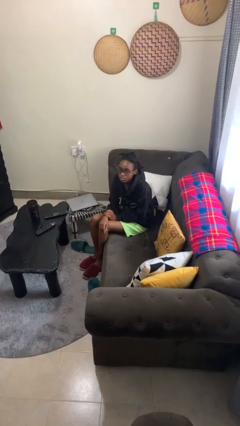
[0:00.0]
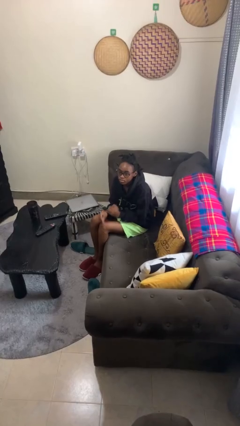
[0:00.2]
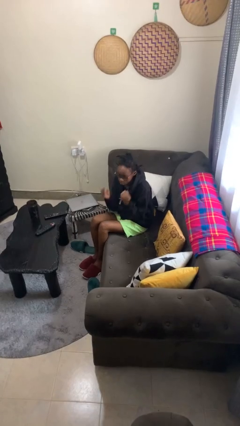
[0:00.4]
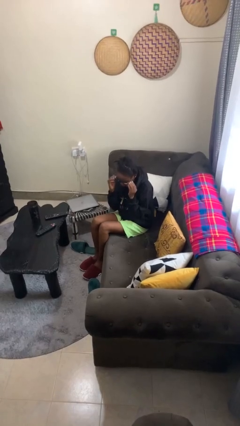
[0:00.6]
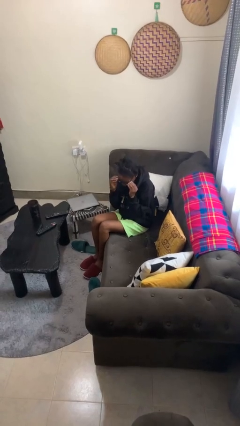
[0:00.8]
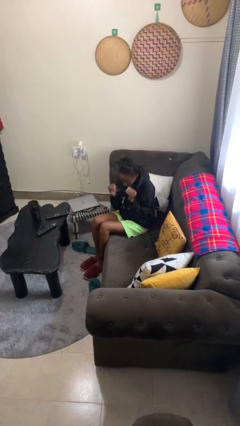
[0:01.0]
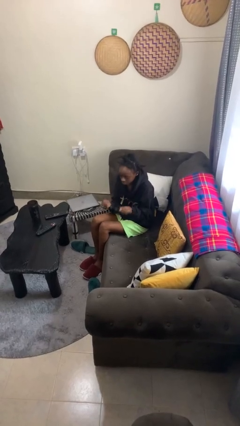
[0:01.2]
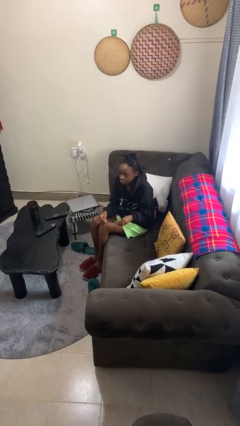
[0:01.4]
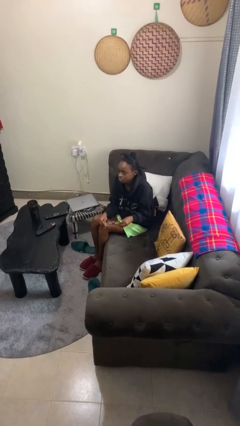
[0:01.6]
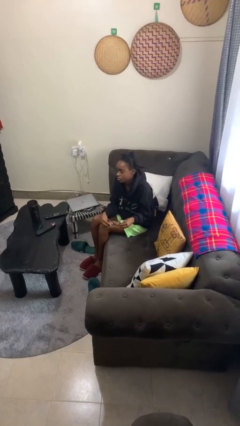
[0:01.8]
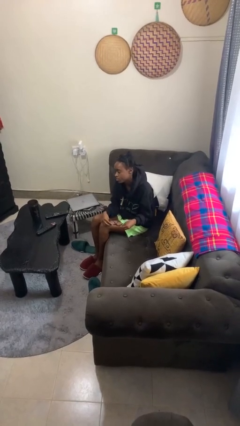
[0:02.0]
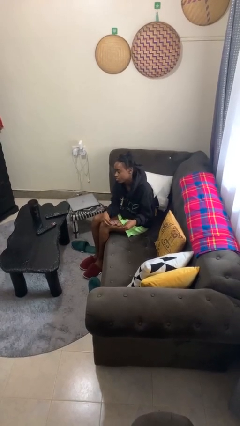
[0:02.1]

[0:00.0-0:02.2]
person takes off glasses

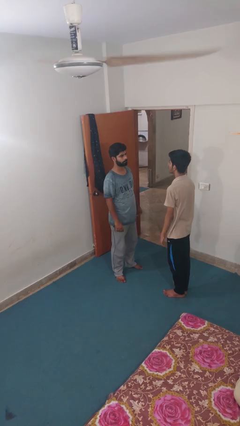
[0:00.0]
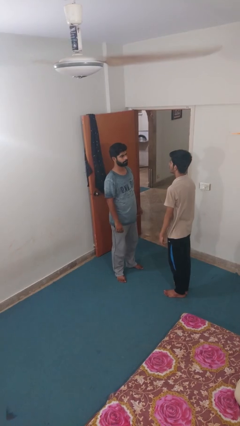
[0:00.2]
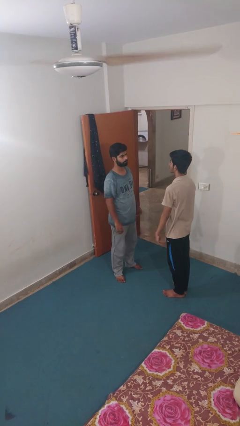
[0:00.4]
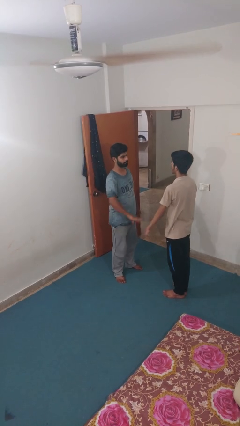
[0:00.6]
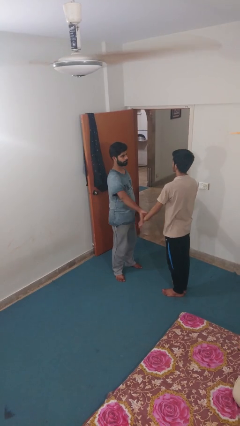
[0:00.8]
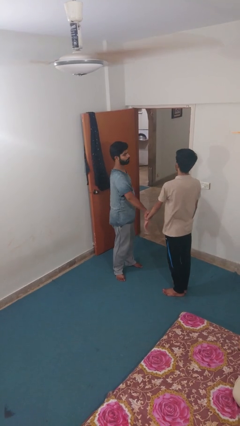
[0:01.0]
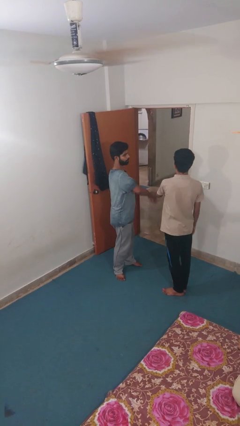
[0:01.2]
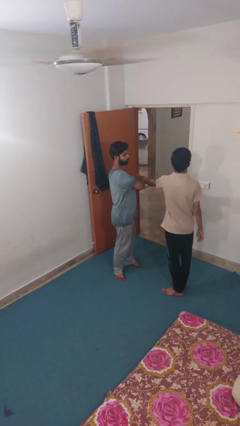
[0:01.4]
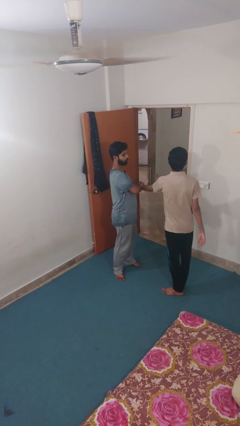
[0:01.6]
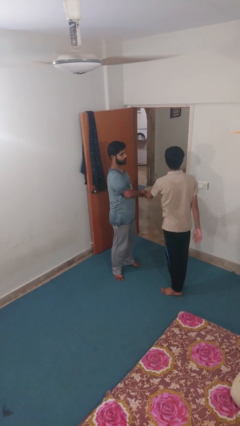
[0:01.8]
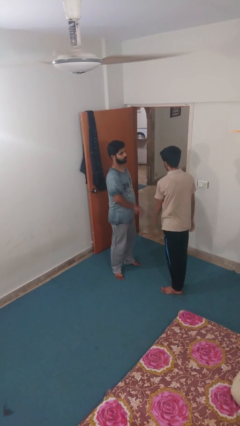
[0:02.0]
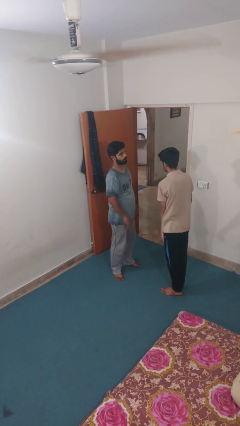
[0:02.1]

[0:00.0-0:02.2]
person grabs person by forearm

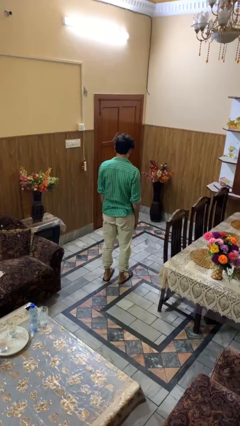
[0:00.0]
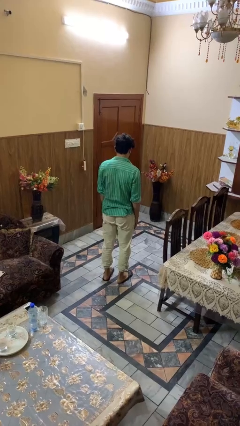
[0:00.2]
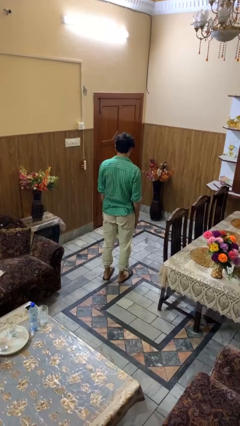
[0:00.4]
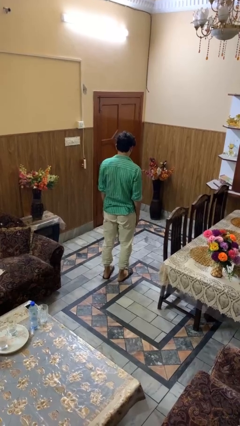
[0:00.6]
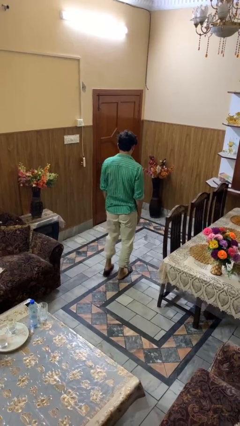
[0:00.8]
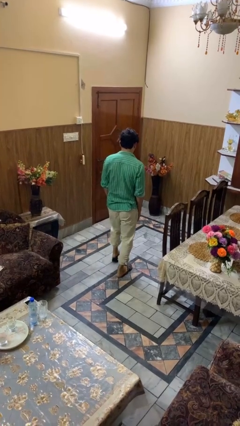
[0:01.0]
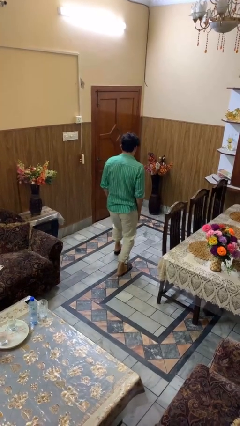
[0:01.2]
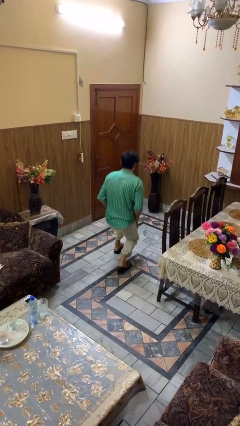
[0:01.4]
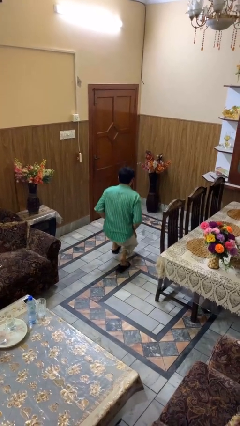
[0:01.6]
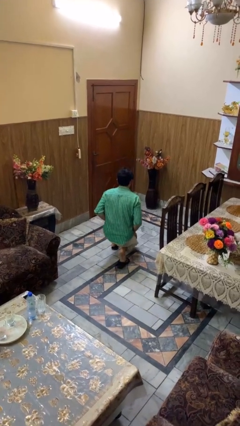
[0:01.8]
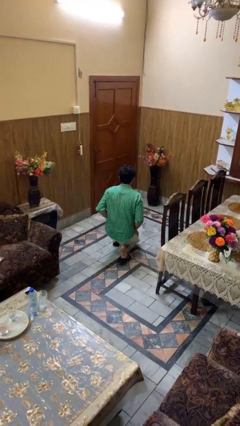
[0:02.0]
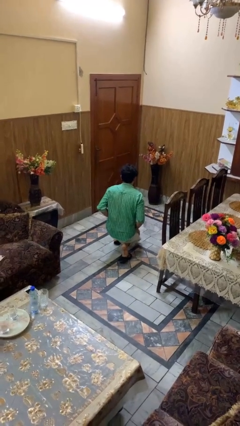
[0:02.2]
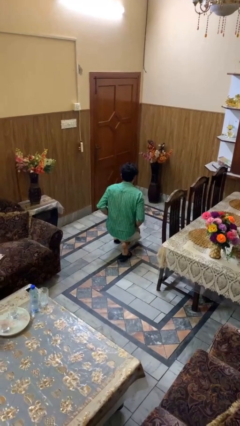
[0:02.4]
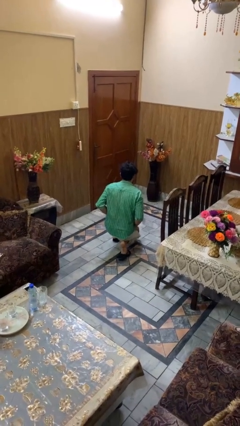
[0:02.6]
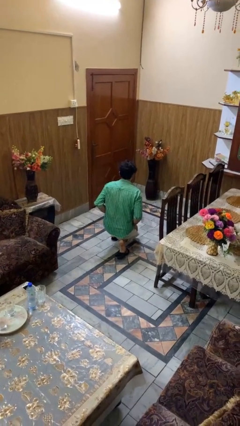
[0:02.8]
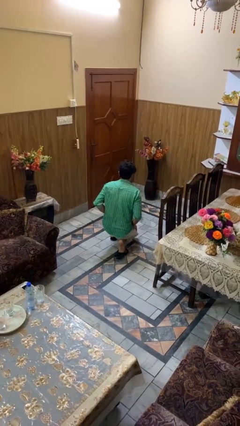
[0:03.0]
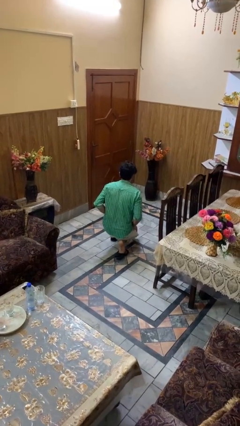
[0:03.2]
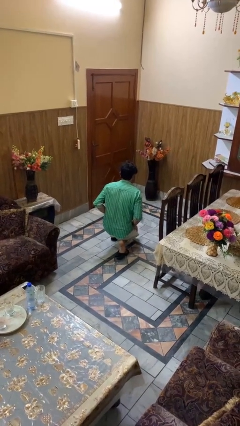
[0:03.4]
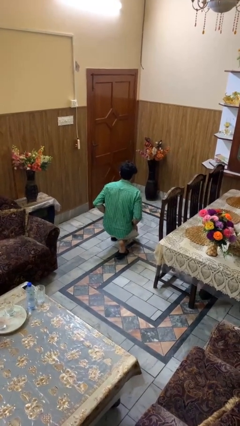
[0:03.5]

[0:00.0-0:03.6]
person kneels

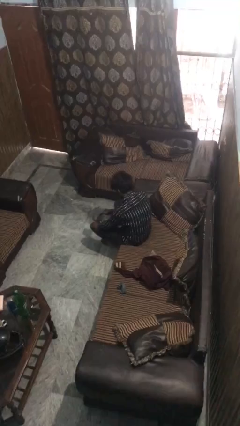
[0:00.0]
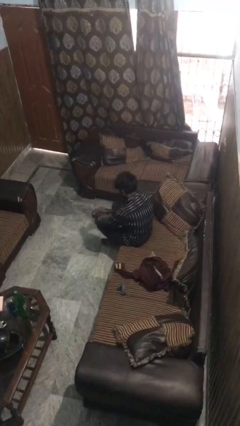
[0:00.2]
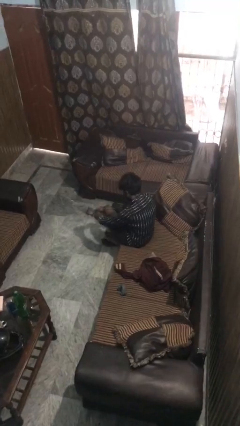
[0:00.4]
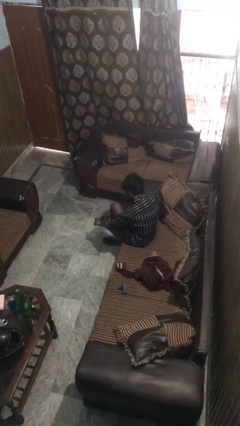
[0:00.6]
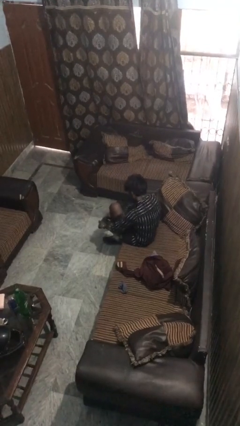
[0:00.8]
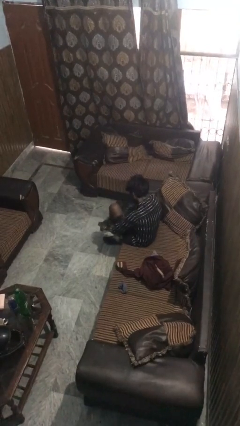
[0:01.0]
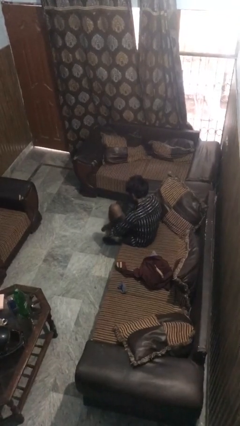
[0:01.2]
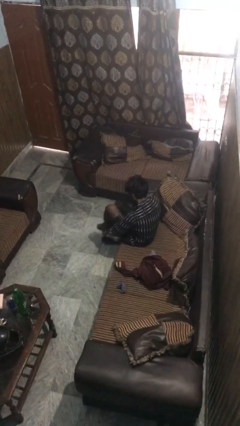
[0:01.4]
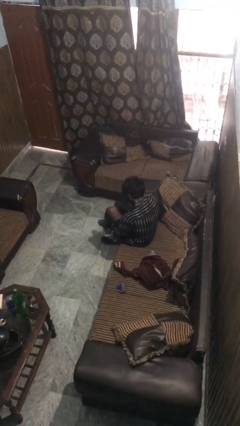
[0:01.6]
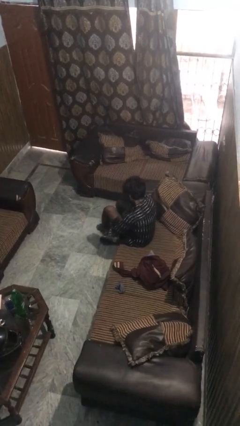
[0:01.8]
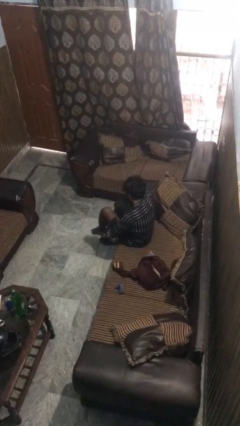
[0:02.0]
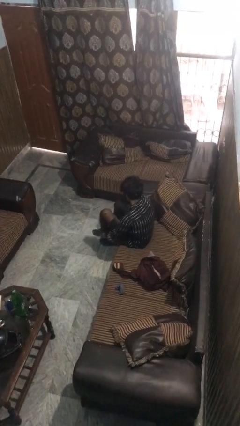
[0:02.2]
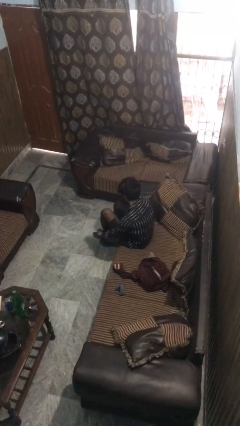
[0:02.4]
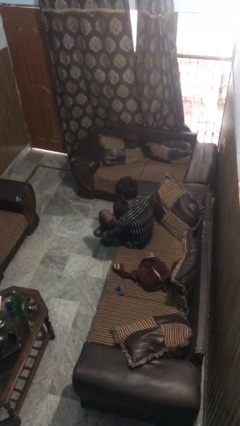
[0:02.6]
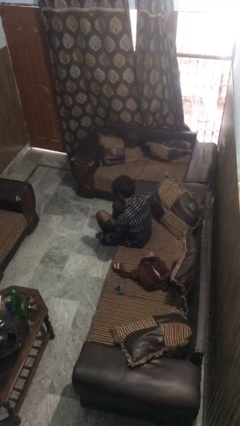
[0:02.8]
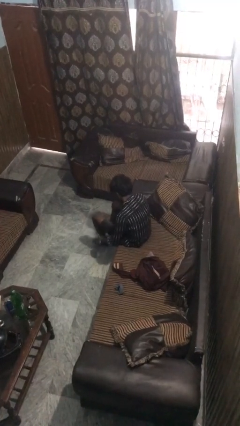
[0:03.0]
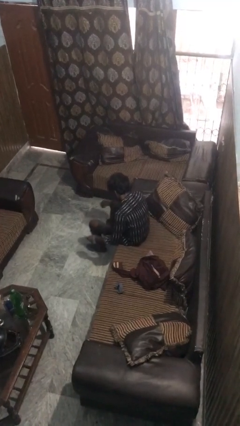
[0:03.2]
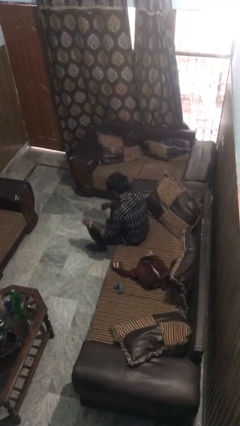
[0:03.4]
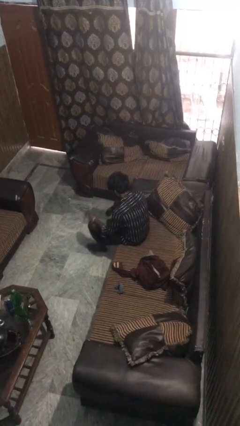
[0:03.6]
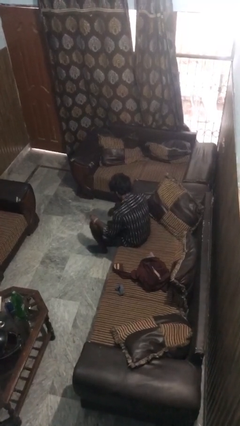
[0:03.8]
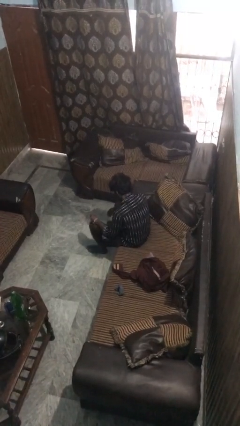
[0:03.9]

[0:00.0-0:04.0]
person puts on socks

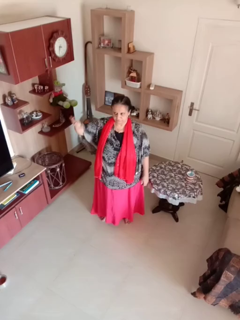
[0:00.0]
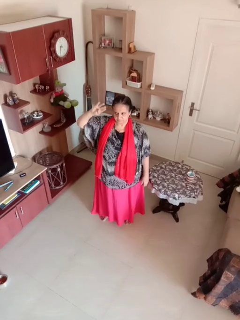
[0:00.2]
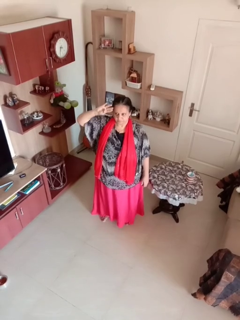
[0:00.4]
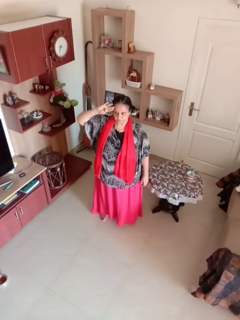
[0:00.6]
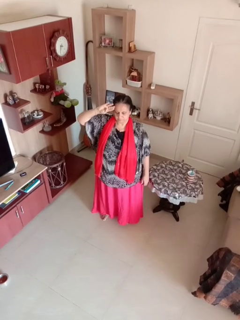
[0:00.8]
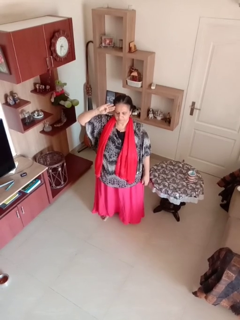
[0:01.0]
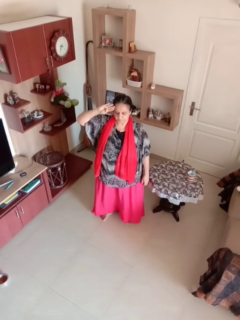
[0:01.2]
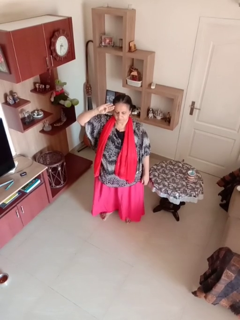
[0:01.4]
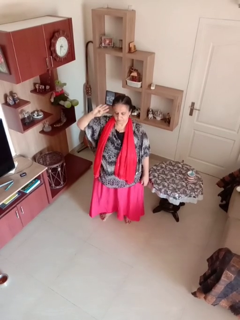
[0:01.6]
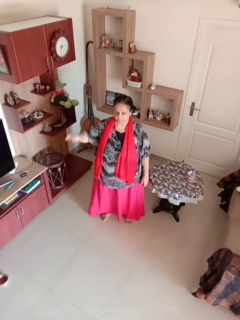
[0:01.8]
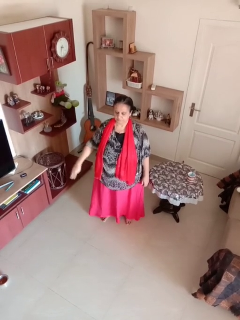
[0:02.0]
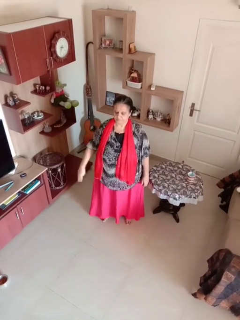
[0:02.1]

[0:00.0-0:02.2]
person salutes

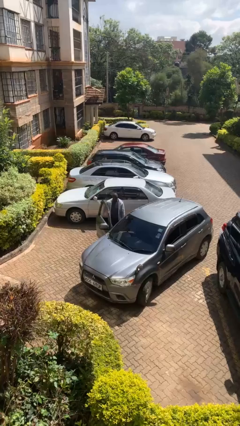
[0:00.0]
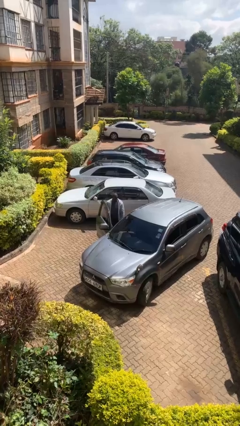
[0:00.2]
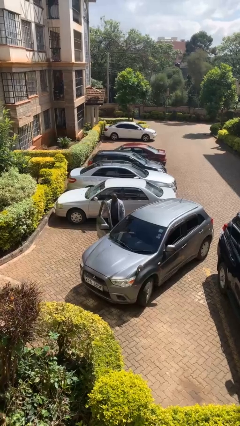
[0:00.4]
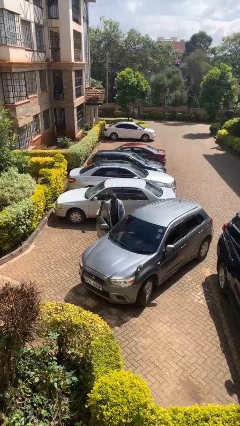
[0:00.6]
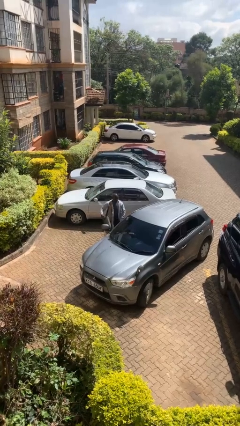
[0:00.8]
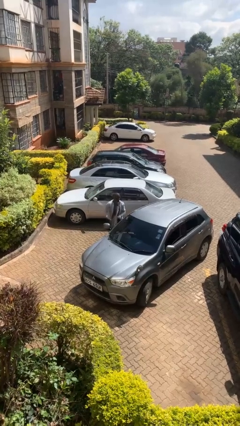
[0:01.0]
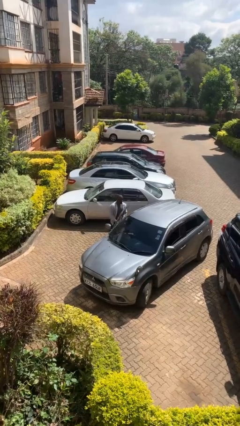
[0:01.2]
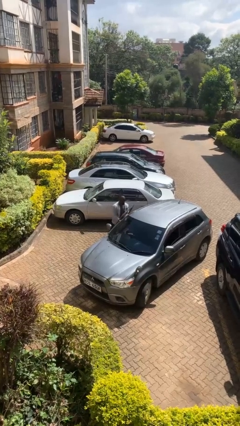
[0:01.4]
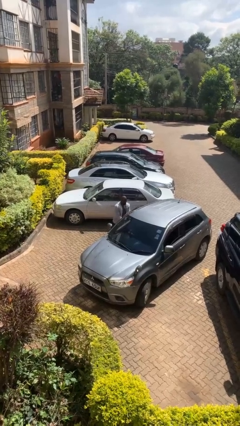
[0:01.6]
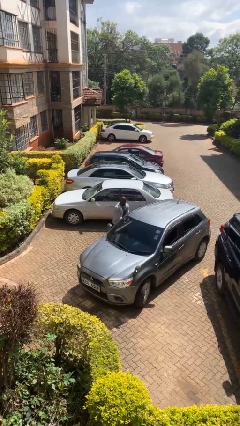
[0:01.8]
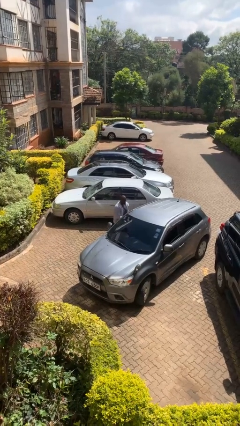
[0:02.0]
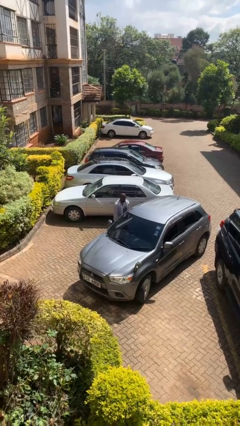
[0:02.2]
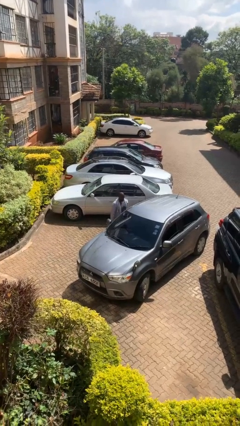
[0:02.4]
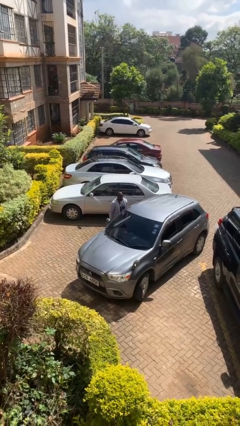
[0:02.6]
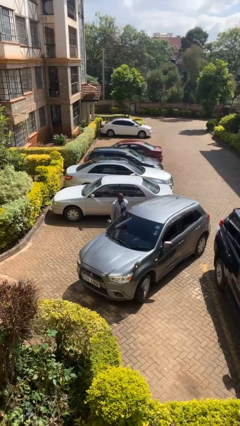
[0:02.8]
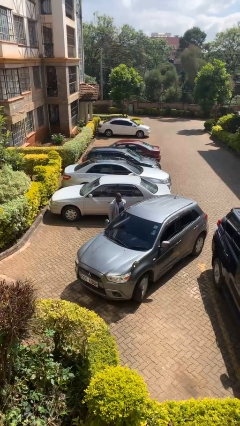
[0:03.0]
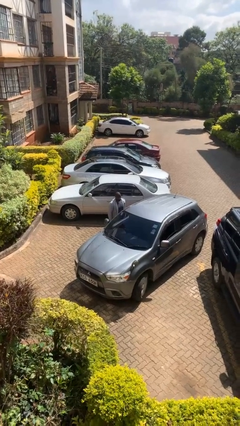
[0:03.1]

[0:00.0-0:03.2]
person closes car door

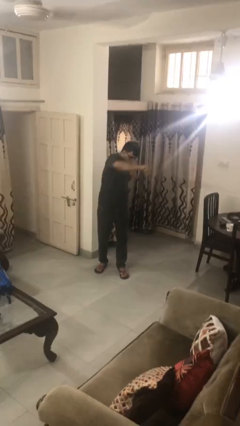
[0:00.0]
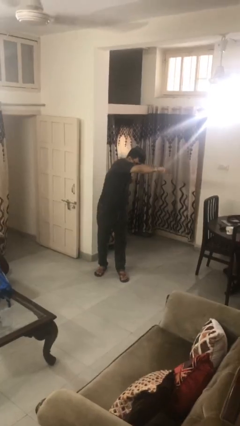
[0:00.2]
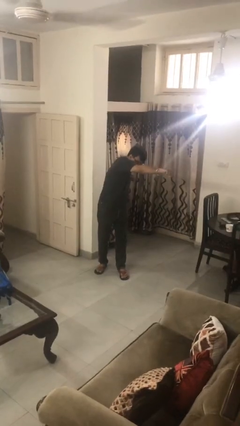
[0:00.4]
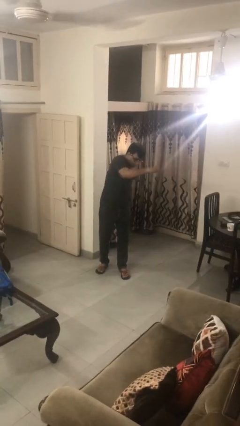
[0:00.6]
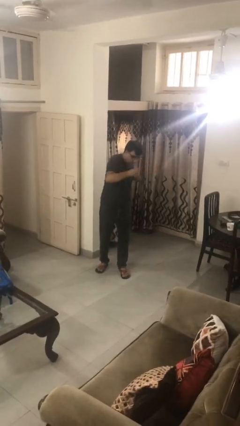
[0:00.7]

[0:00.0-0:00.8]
person punches
